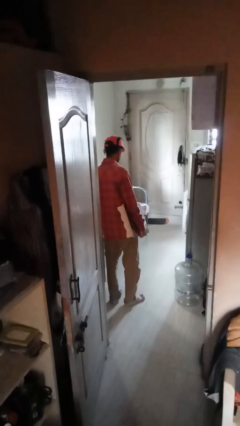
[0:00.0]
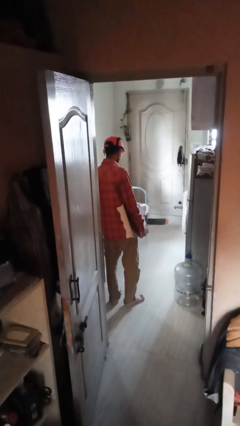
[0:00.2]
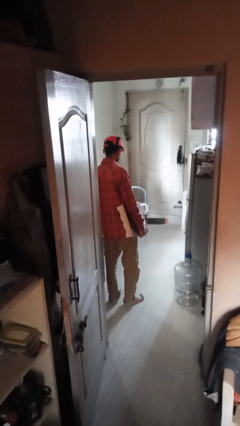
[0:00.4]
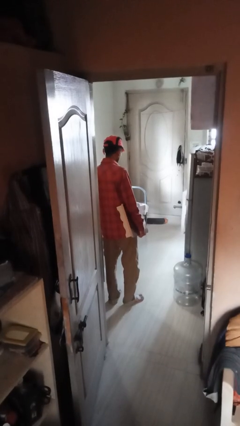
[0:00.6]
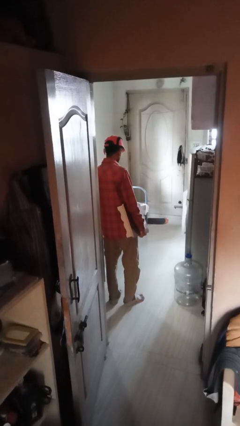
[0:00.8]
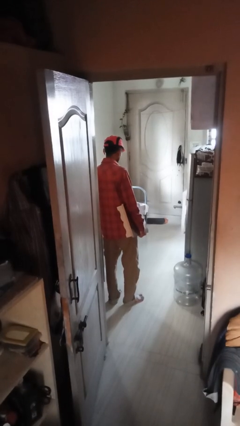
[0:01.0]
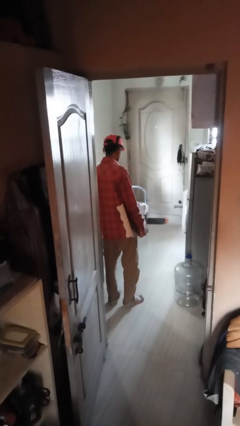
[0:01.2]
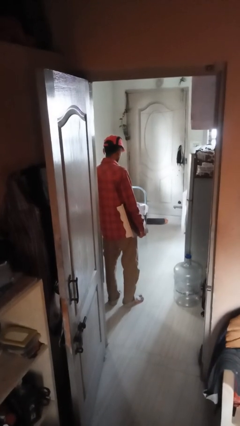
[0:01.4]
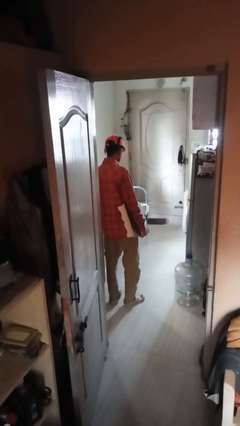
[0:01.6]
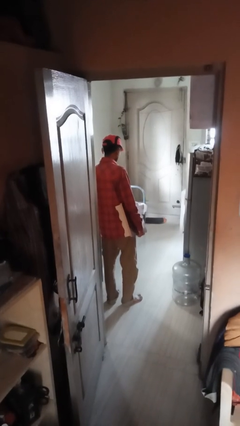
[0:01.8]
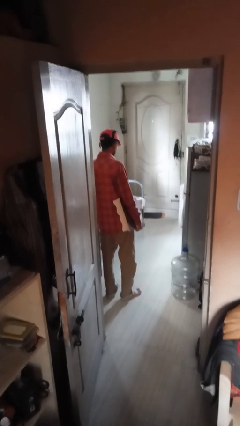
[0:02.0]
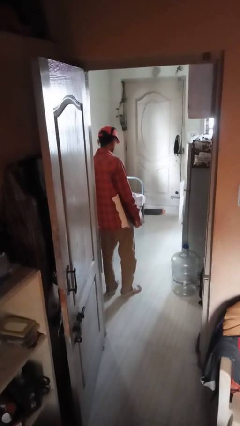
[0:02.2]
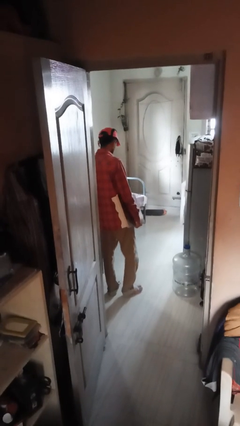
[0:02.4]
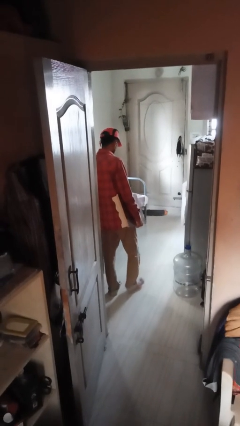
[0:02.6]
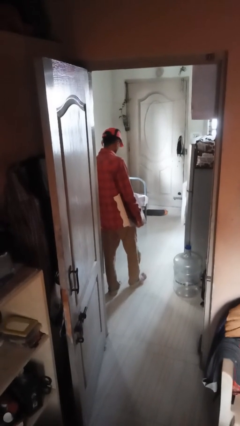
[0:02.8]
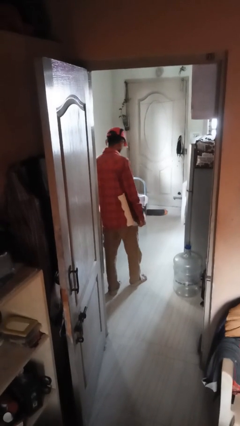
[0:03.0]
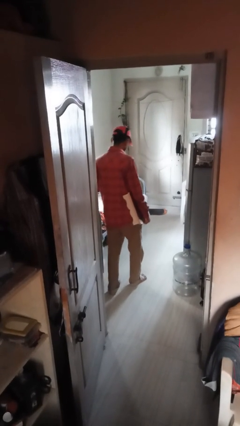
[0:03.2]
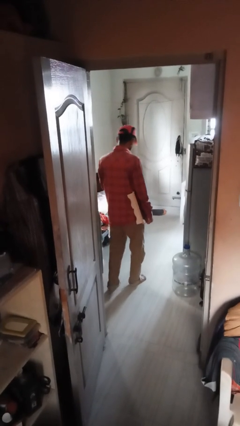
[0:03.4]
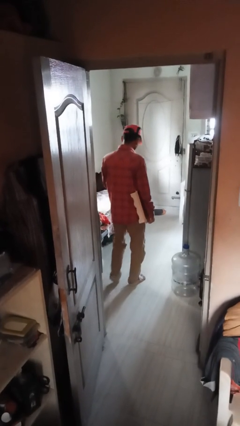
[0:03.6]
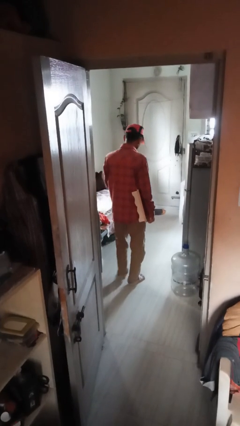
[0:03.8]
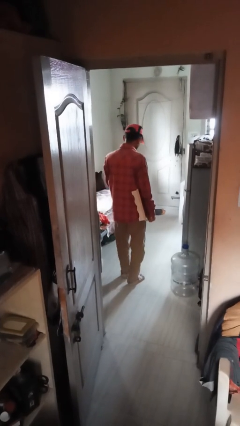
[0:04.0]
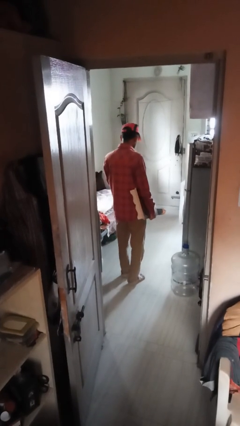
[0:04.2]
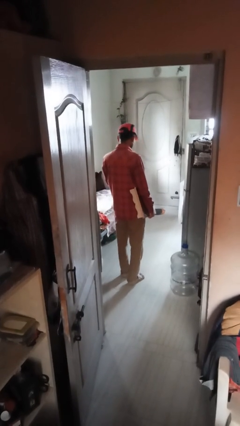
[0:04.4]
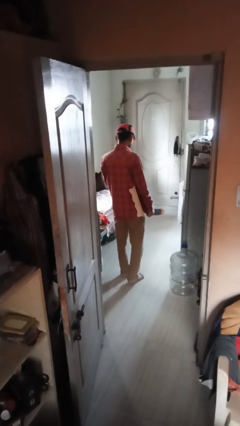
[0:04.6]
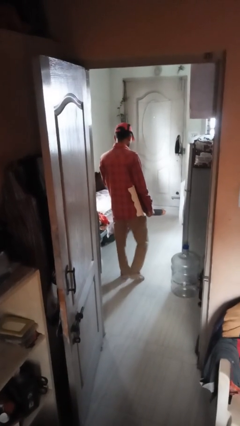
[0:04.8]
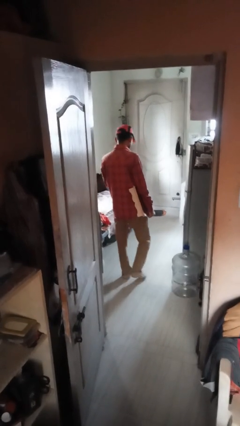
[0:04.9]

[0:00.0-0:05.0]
person carries furniture

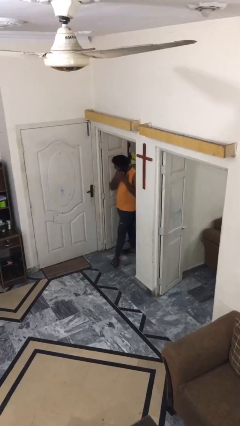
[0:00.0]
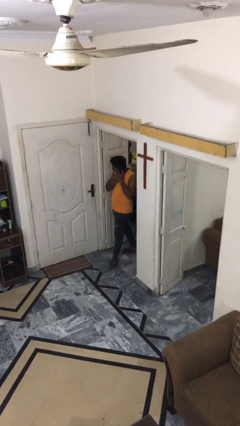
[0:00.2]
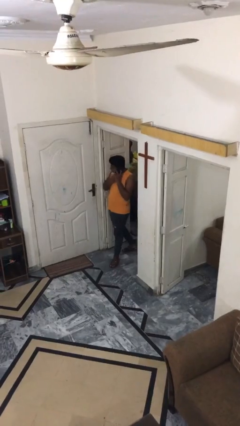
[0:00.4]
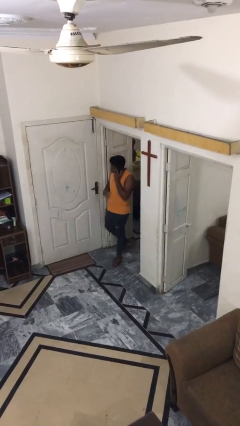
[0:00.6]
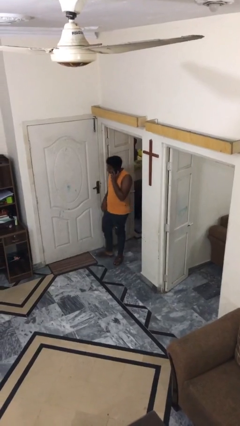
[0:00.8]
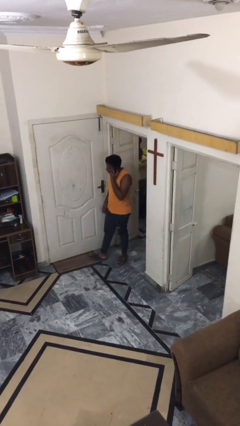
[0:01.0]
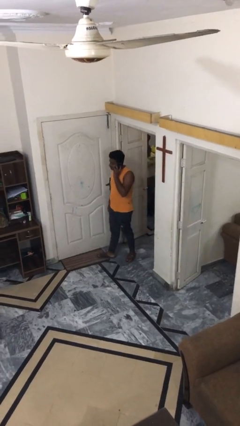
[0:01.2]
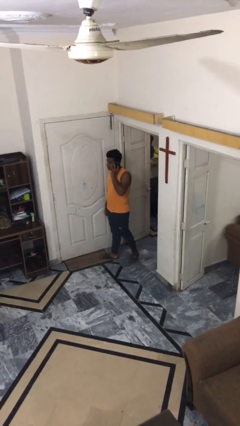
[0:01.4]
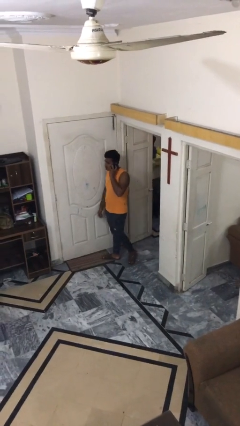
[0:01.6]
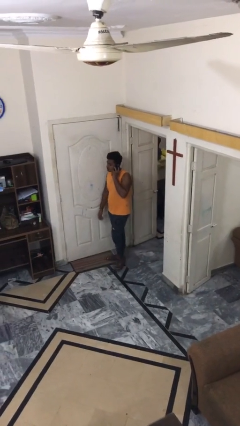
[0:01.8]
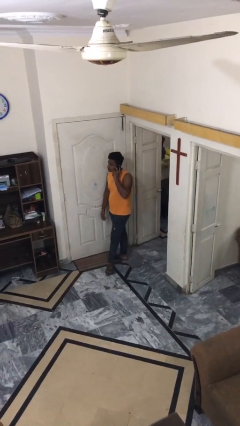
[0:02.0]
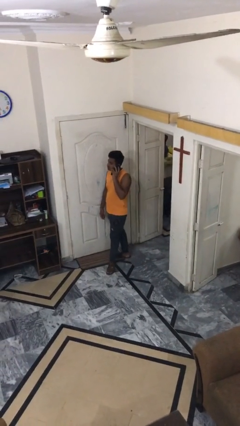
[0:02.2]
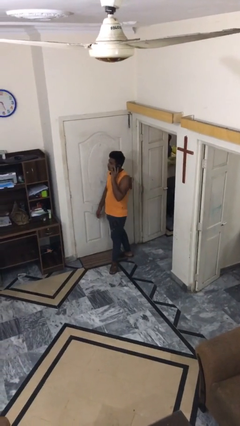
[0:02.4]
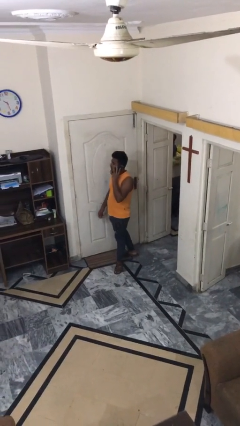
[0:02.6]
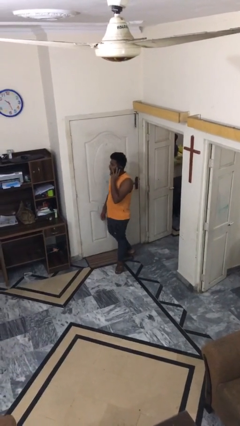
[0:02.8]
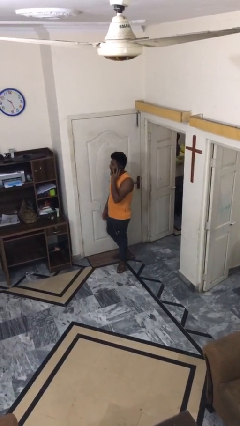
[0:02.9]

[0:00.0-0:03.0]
person enters scene through structure

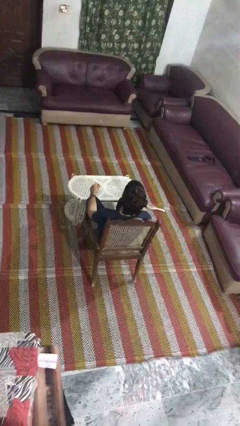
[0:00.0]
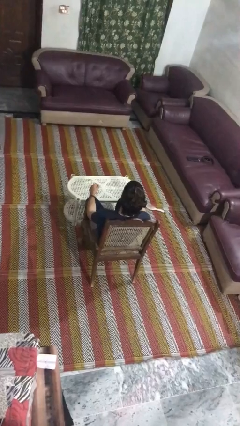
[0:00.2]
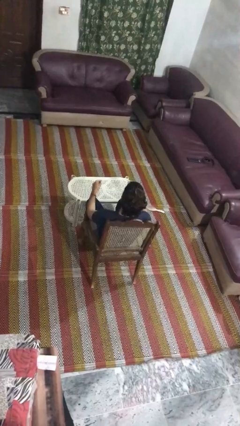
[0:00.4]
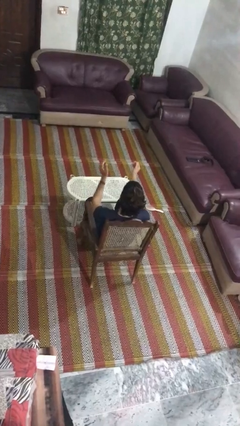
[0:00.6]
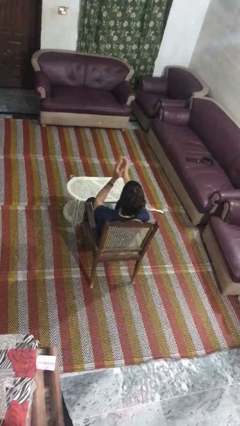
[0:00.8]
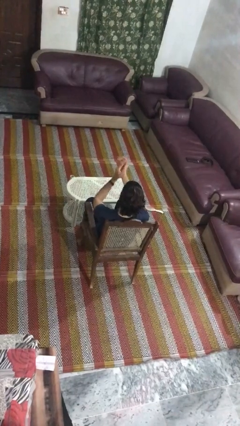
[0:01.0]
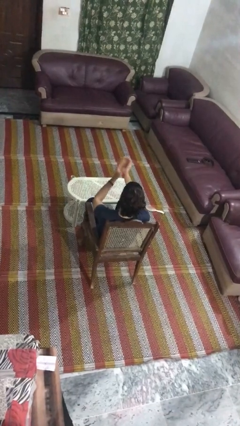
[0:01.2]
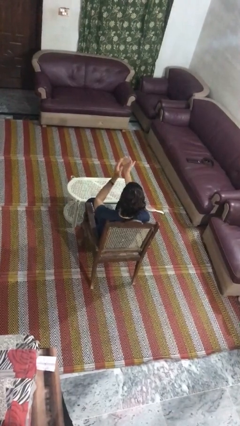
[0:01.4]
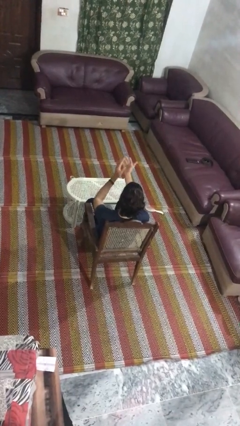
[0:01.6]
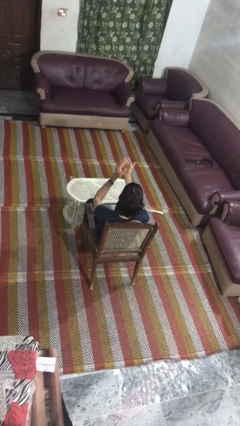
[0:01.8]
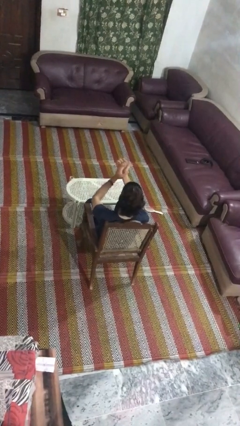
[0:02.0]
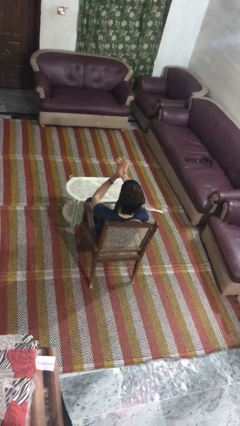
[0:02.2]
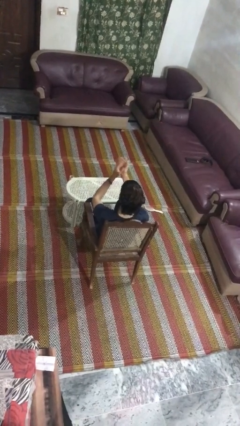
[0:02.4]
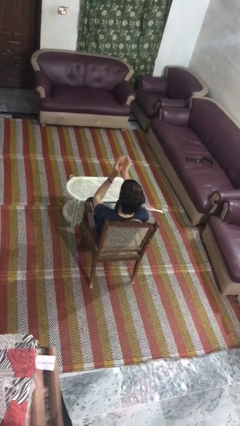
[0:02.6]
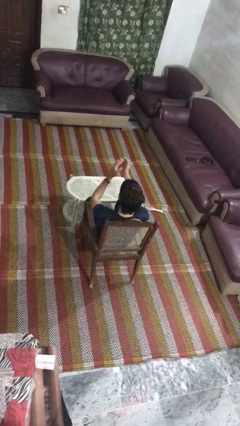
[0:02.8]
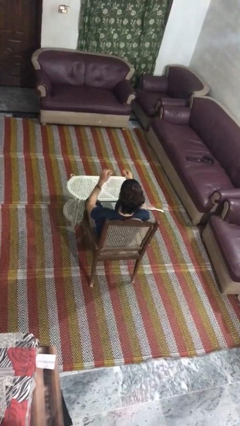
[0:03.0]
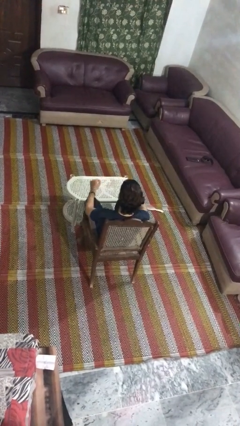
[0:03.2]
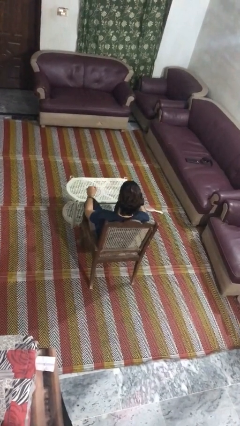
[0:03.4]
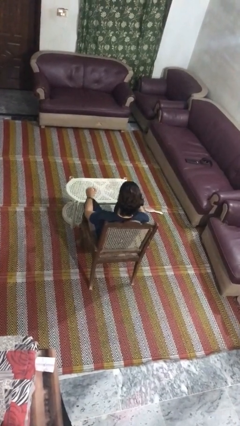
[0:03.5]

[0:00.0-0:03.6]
person claps hands

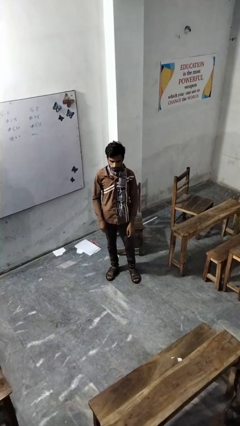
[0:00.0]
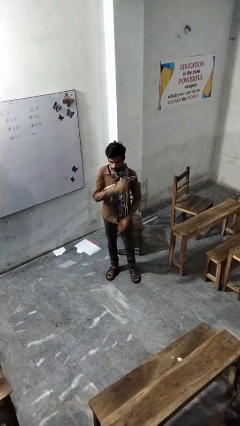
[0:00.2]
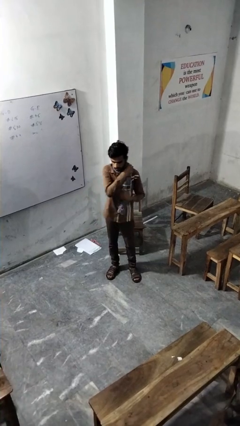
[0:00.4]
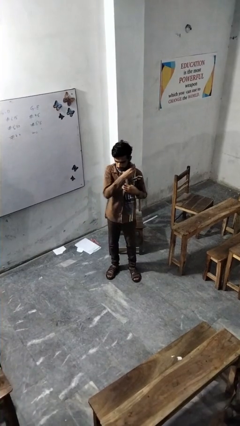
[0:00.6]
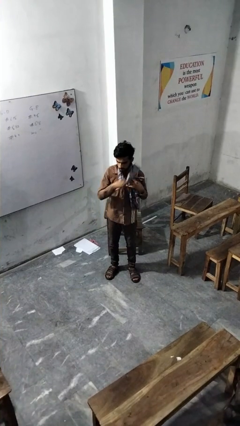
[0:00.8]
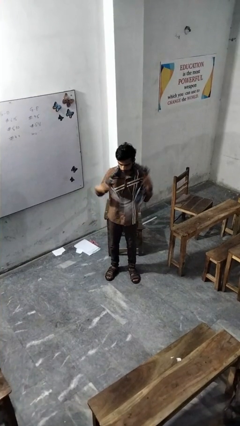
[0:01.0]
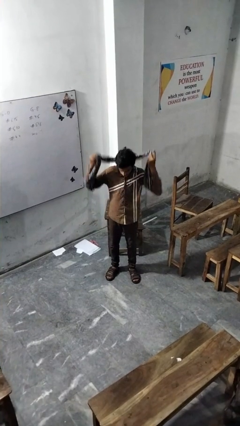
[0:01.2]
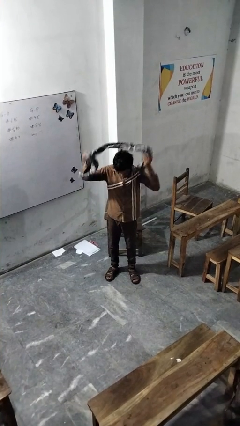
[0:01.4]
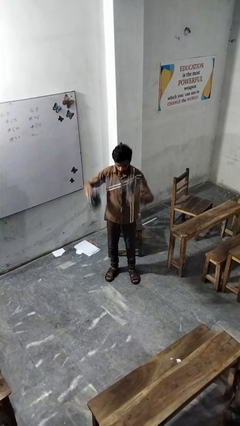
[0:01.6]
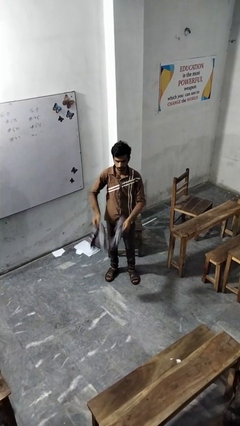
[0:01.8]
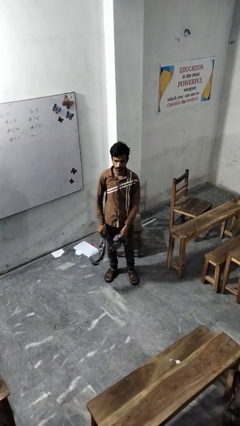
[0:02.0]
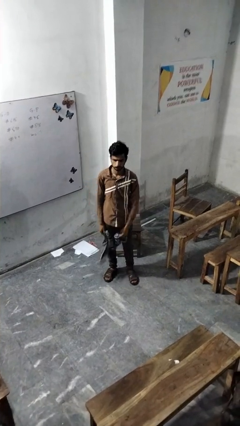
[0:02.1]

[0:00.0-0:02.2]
person takes off scarf

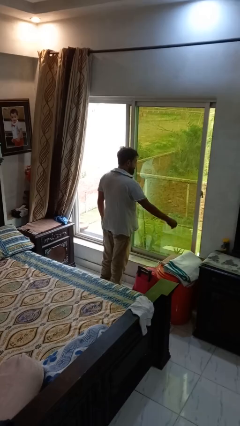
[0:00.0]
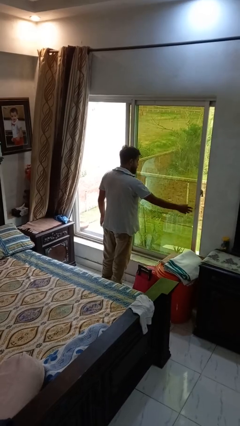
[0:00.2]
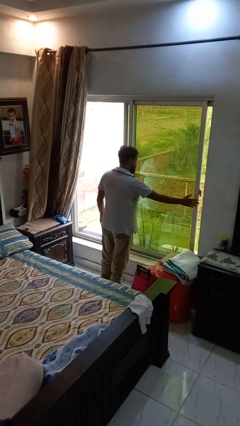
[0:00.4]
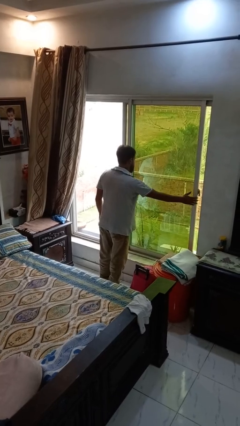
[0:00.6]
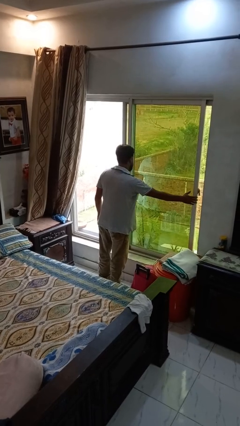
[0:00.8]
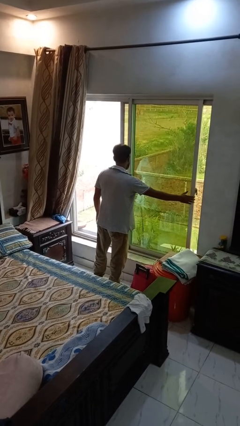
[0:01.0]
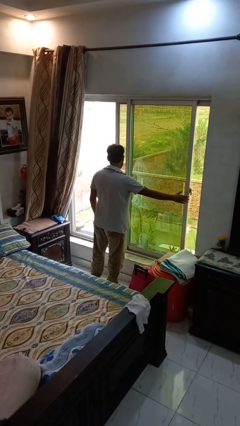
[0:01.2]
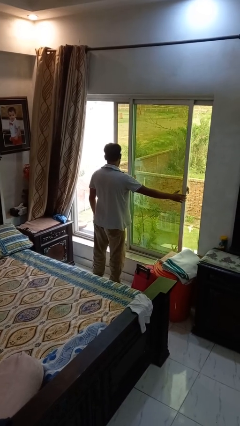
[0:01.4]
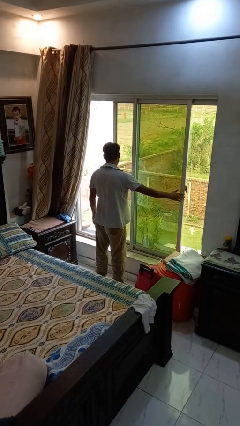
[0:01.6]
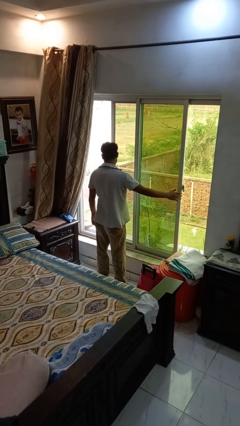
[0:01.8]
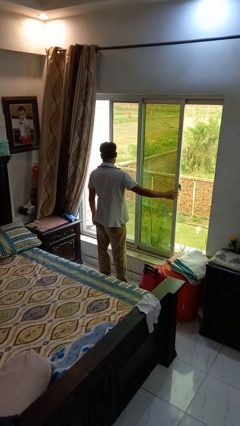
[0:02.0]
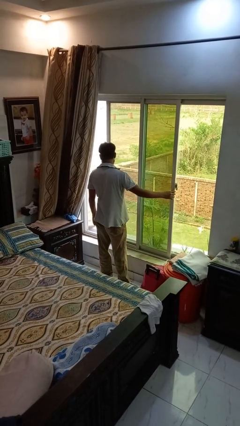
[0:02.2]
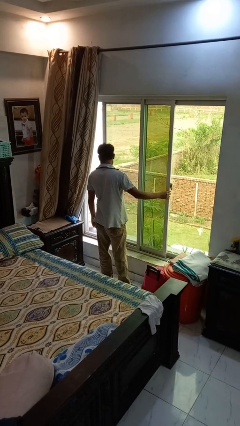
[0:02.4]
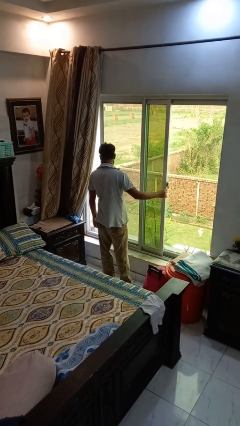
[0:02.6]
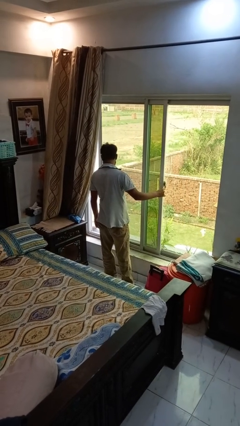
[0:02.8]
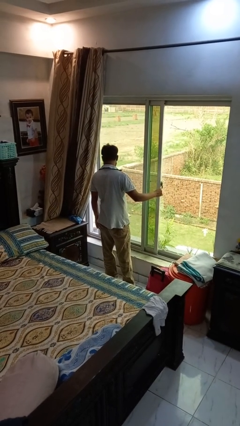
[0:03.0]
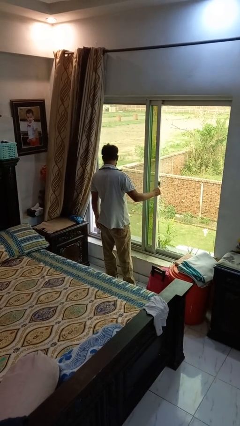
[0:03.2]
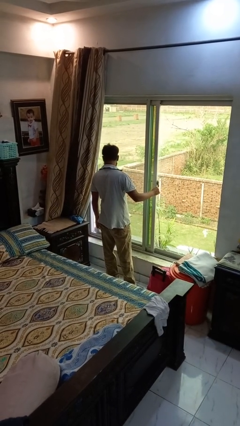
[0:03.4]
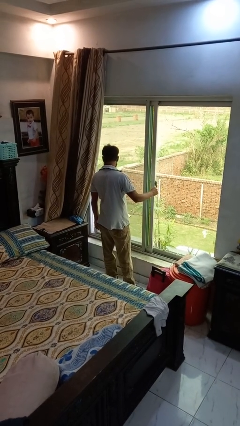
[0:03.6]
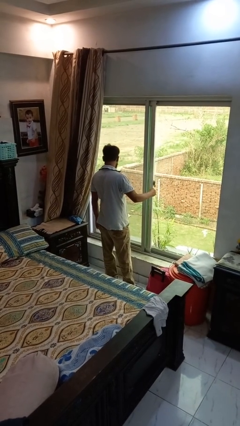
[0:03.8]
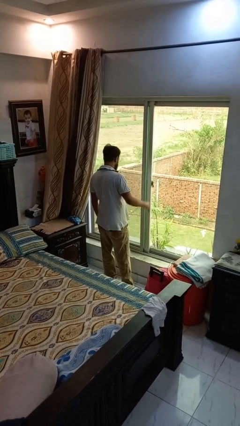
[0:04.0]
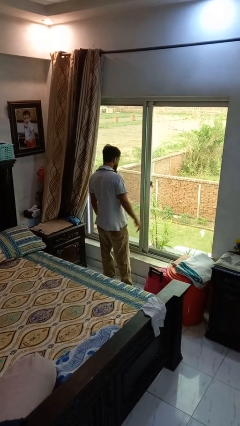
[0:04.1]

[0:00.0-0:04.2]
person closes sliding door
